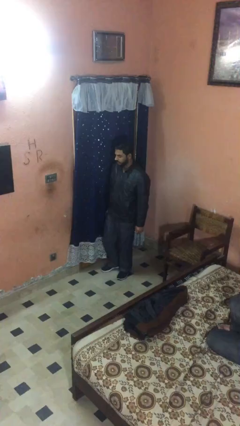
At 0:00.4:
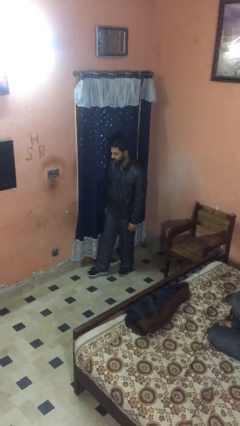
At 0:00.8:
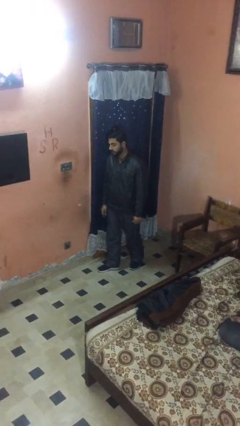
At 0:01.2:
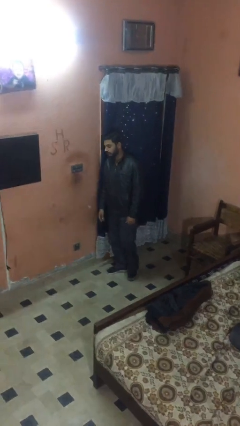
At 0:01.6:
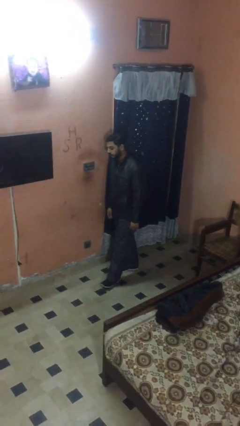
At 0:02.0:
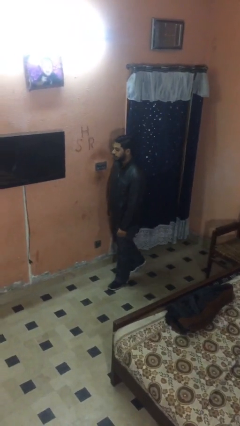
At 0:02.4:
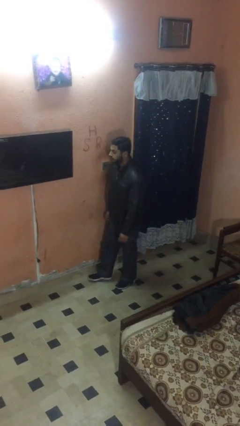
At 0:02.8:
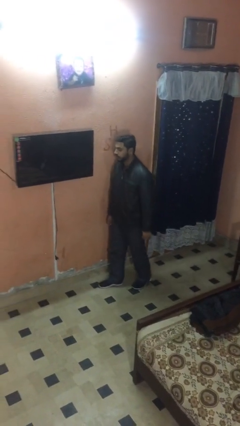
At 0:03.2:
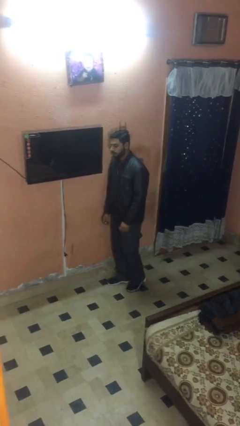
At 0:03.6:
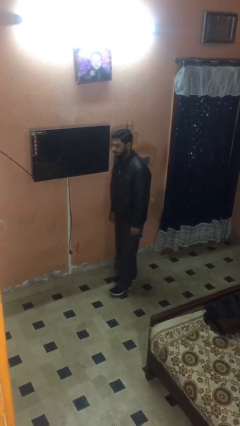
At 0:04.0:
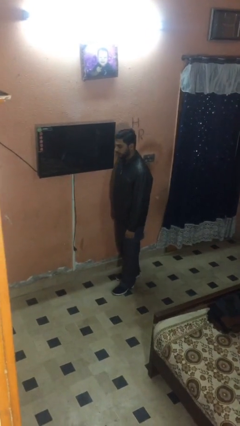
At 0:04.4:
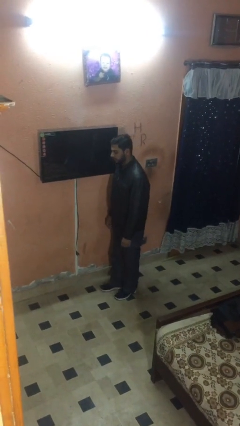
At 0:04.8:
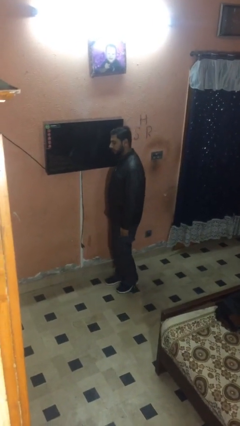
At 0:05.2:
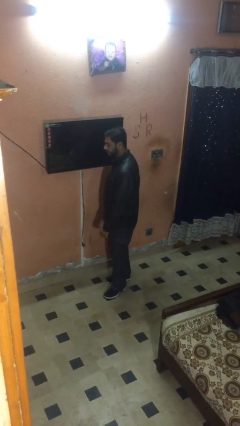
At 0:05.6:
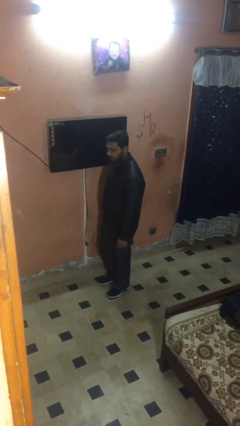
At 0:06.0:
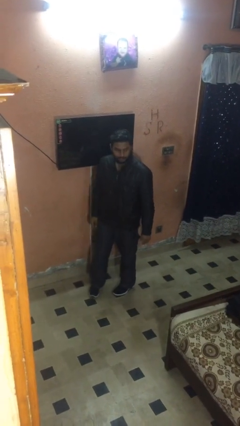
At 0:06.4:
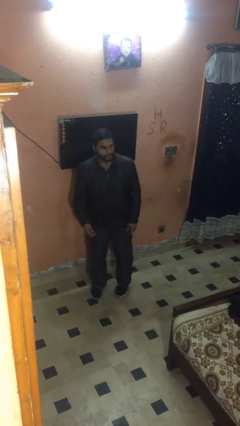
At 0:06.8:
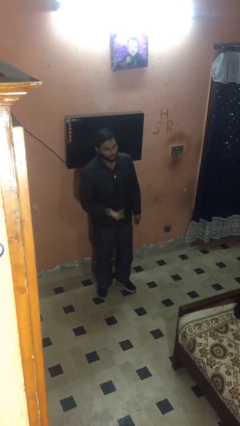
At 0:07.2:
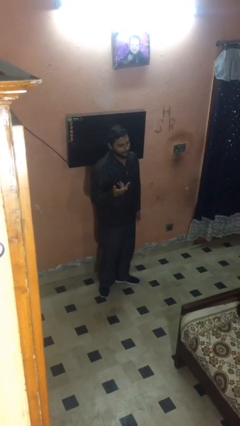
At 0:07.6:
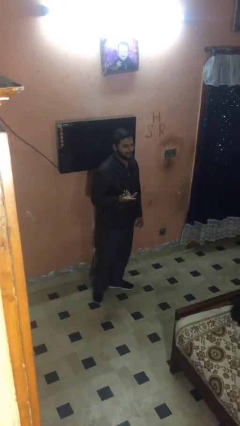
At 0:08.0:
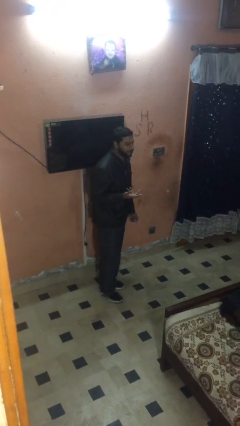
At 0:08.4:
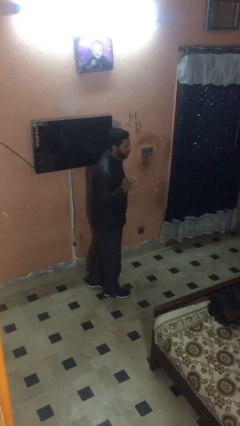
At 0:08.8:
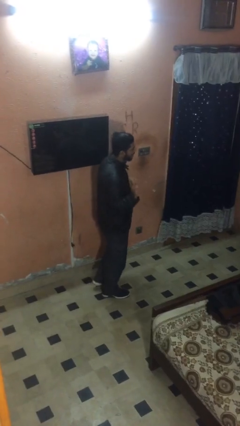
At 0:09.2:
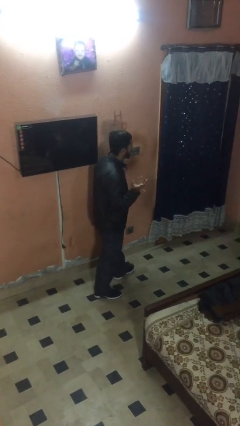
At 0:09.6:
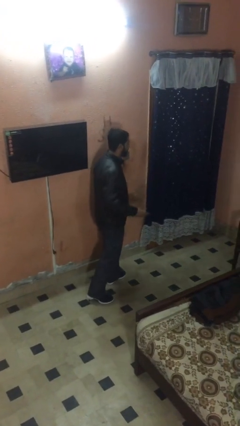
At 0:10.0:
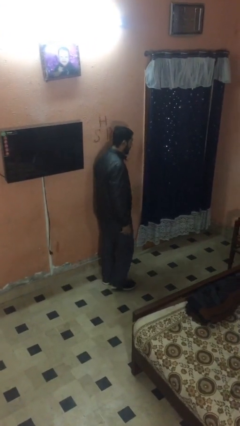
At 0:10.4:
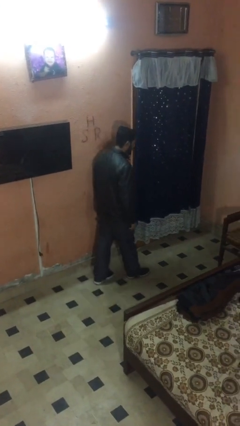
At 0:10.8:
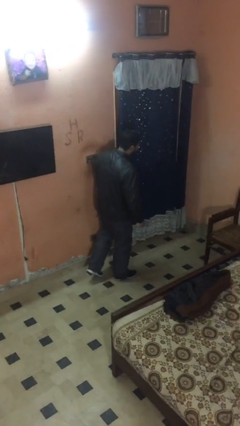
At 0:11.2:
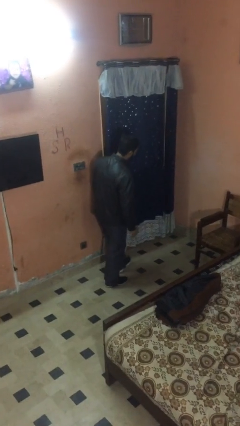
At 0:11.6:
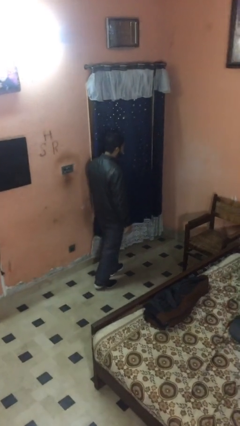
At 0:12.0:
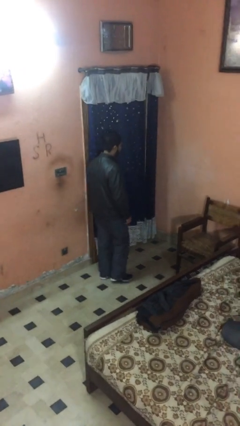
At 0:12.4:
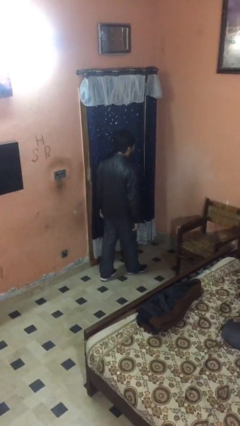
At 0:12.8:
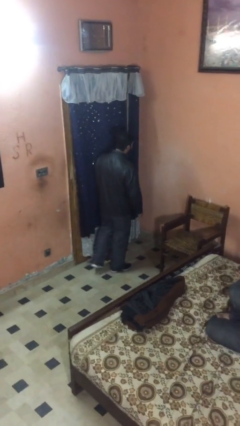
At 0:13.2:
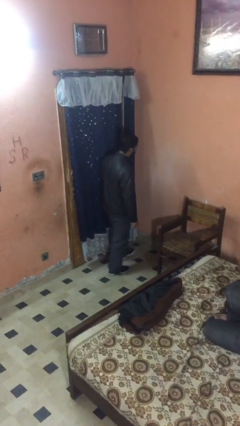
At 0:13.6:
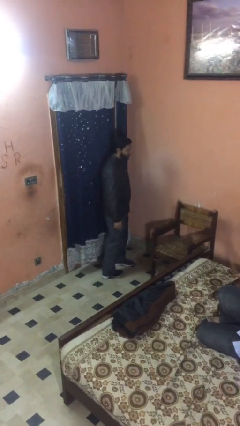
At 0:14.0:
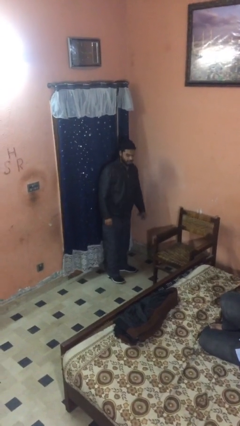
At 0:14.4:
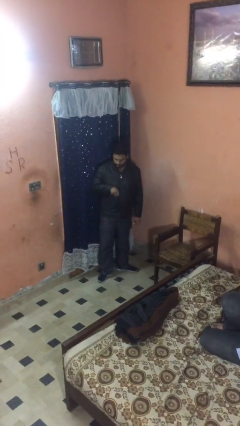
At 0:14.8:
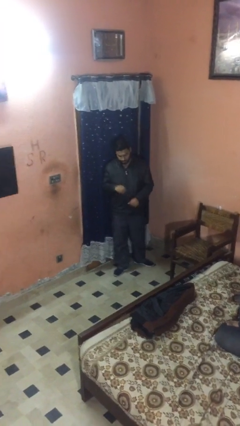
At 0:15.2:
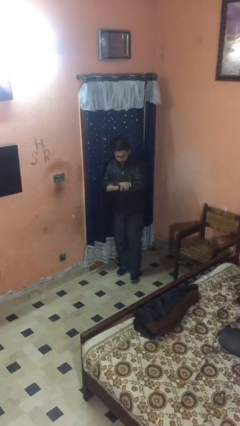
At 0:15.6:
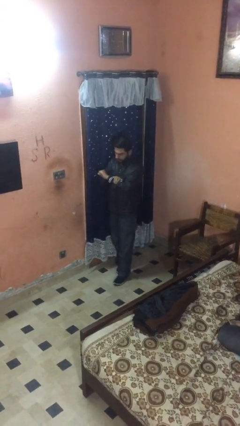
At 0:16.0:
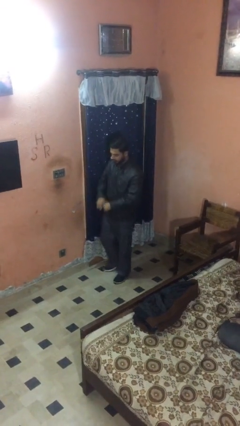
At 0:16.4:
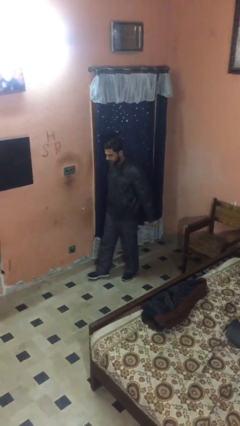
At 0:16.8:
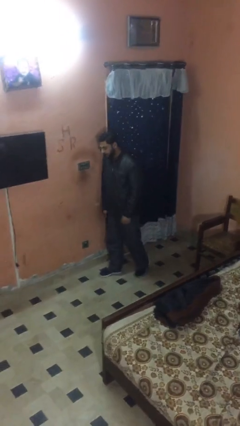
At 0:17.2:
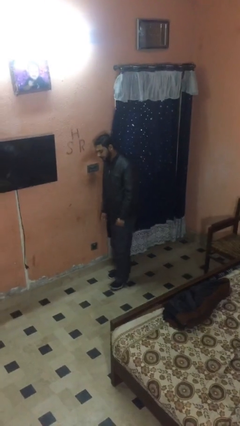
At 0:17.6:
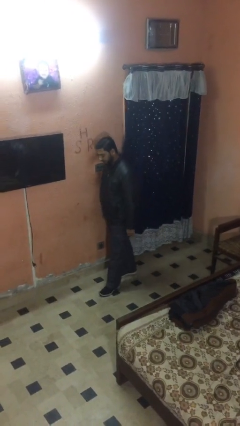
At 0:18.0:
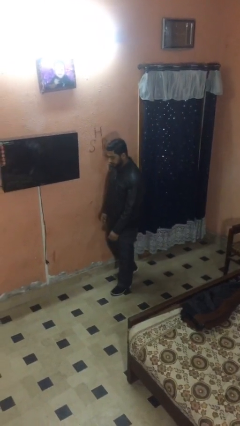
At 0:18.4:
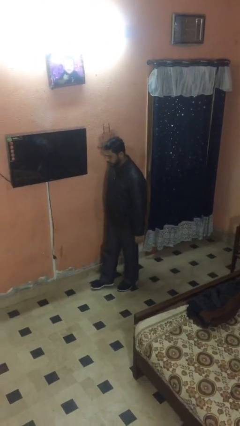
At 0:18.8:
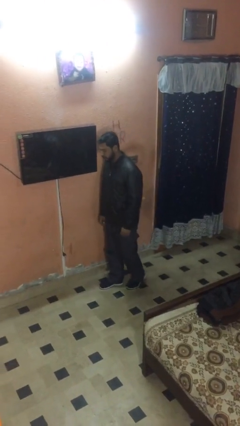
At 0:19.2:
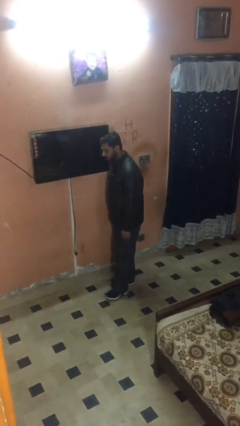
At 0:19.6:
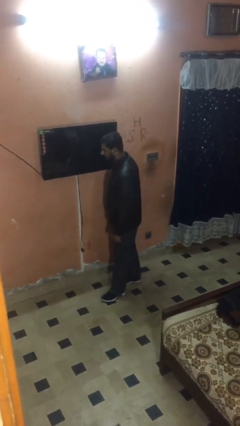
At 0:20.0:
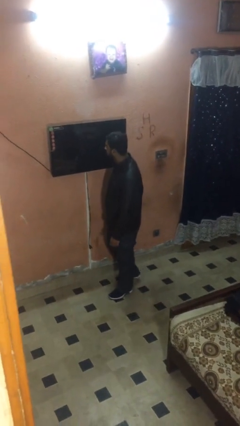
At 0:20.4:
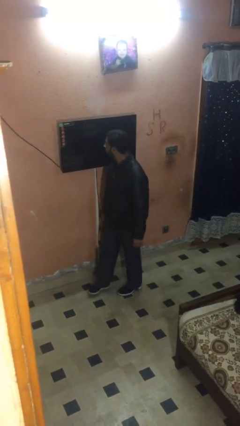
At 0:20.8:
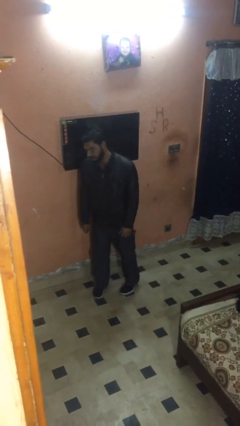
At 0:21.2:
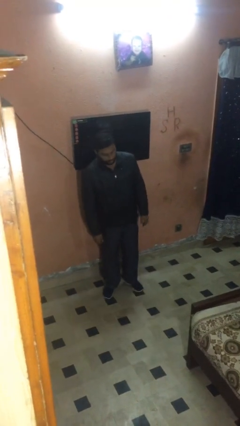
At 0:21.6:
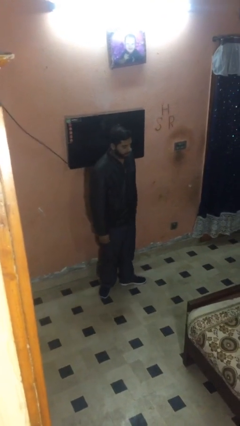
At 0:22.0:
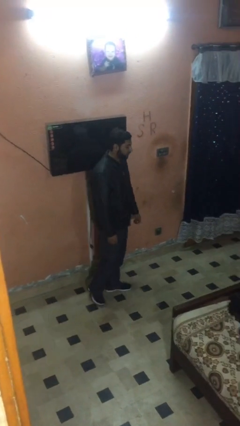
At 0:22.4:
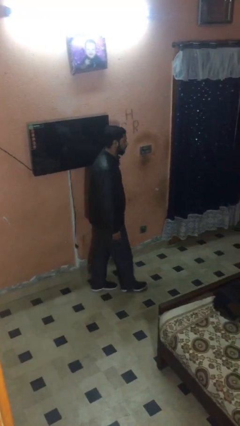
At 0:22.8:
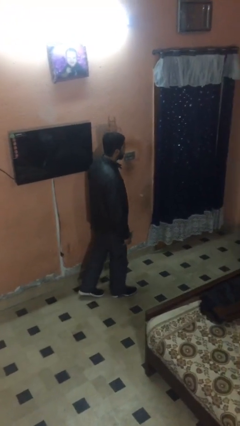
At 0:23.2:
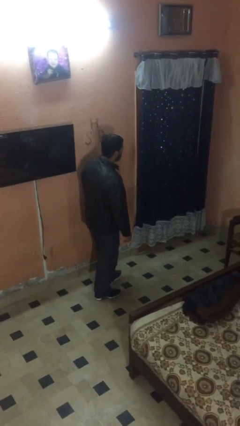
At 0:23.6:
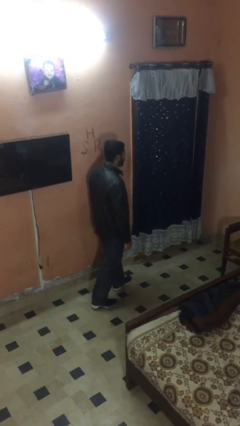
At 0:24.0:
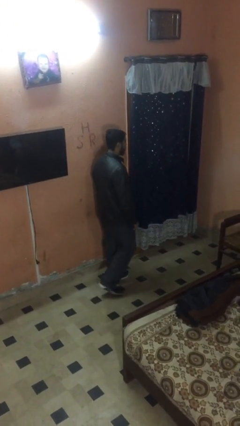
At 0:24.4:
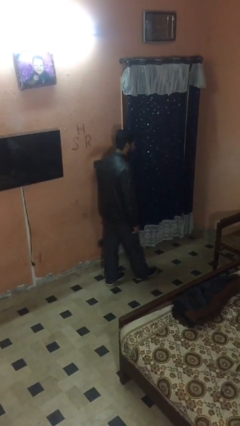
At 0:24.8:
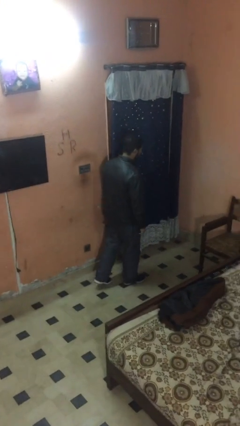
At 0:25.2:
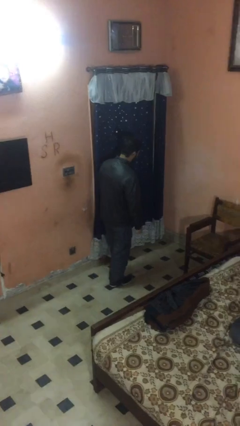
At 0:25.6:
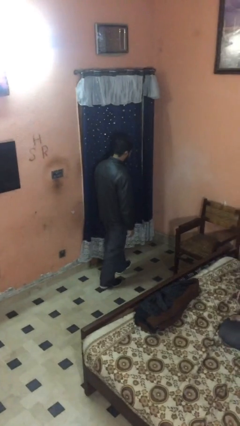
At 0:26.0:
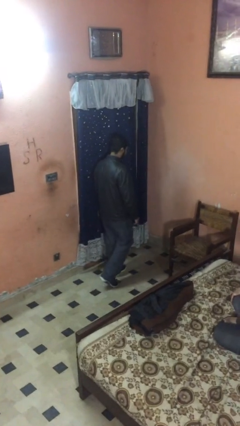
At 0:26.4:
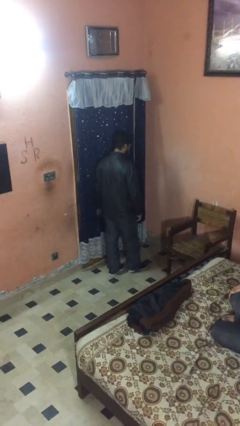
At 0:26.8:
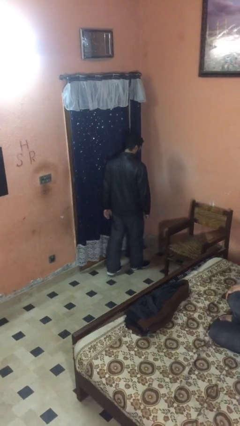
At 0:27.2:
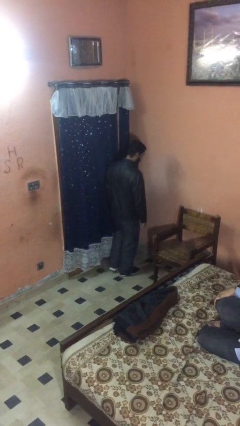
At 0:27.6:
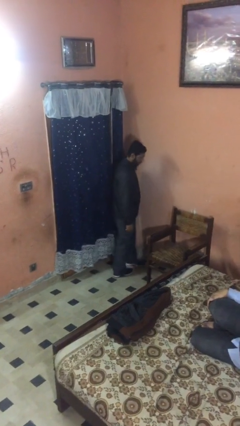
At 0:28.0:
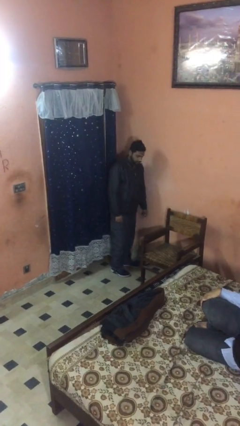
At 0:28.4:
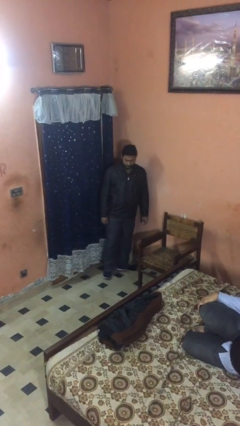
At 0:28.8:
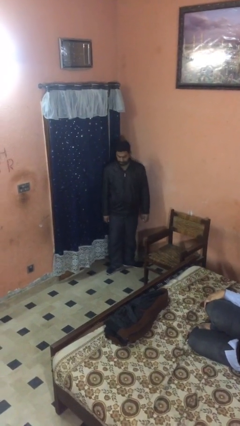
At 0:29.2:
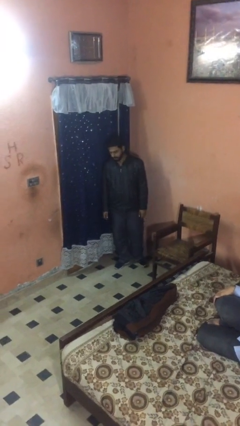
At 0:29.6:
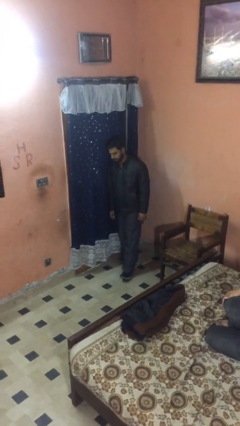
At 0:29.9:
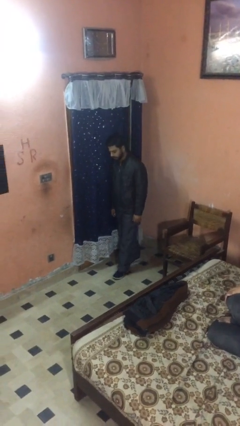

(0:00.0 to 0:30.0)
person walks

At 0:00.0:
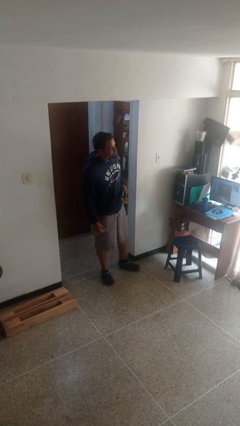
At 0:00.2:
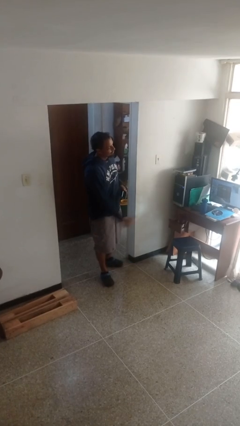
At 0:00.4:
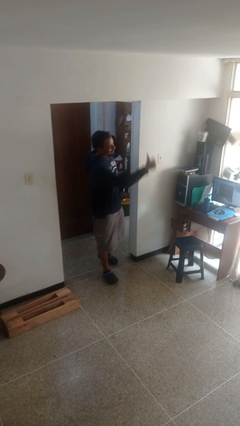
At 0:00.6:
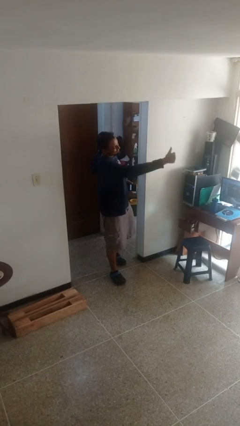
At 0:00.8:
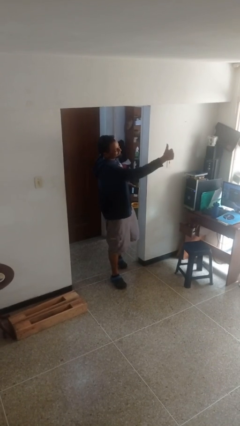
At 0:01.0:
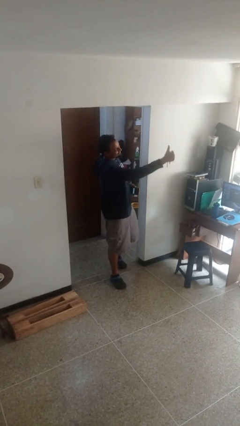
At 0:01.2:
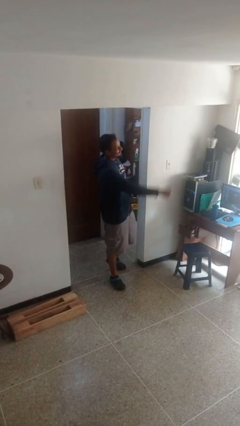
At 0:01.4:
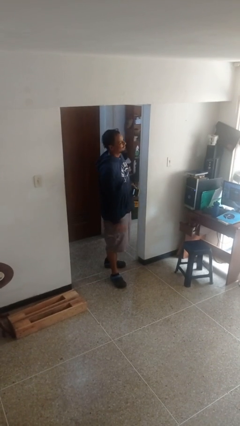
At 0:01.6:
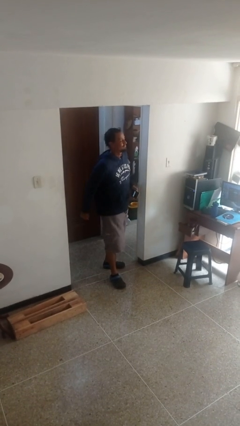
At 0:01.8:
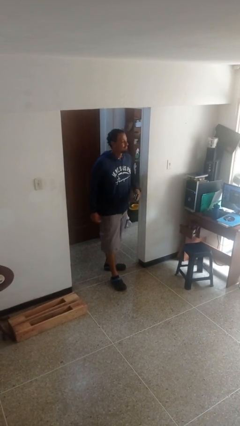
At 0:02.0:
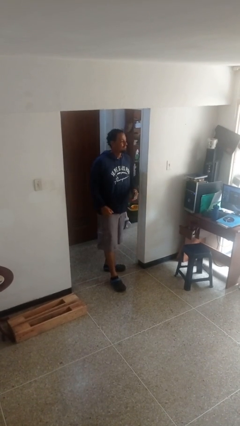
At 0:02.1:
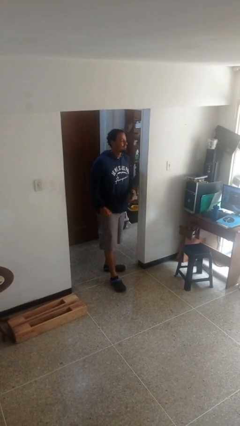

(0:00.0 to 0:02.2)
person gestures thumbs up

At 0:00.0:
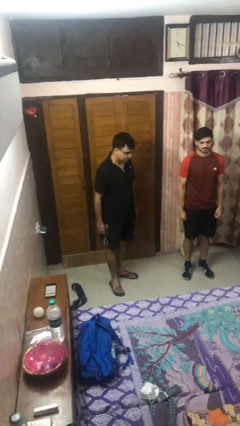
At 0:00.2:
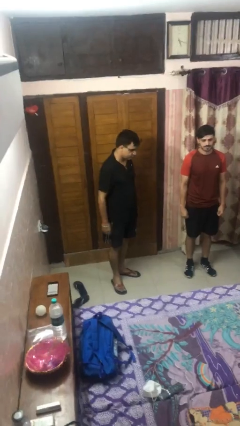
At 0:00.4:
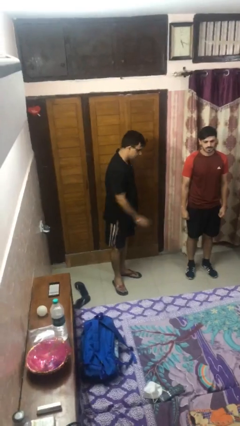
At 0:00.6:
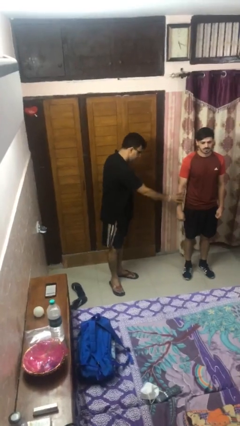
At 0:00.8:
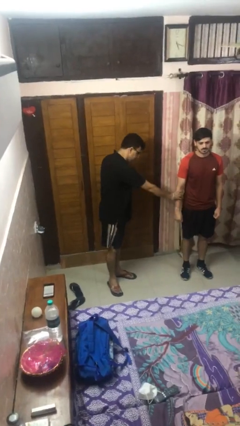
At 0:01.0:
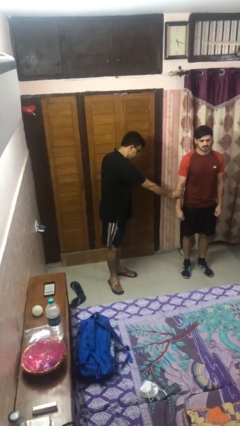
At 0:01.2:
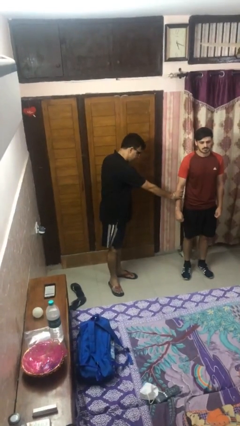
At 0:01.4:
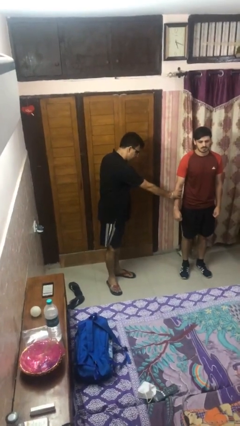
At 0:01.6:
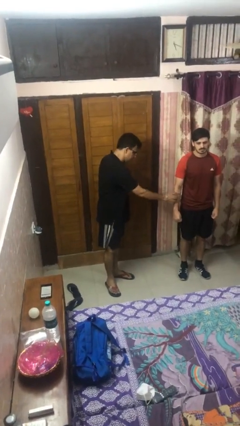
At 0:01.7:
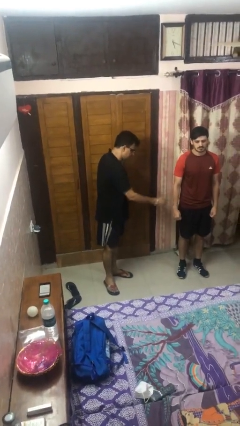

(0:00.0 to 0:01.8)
person grabs person by forearm
